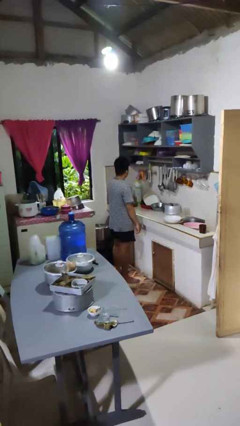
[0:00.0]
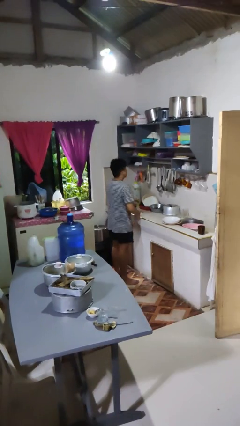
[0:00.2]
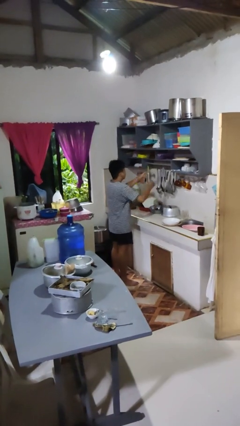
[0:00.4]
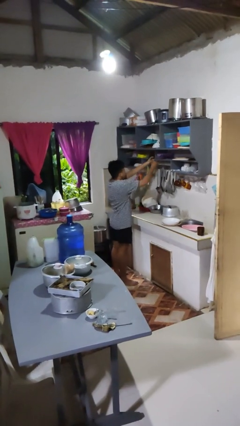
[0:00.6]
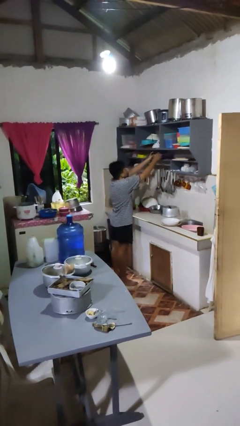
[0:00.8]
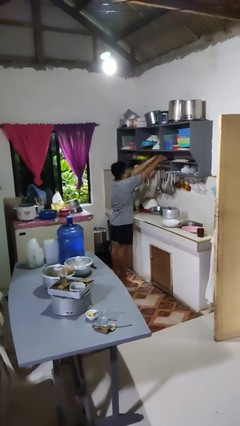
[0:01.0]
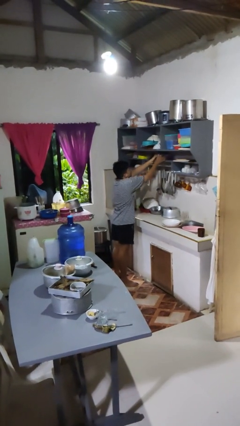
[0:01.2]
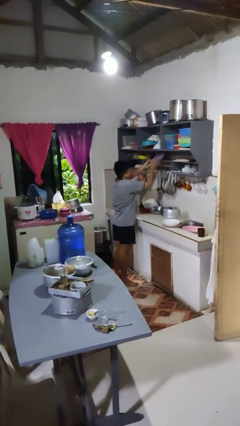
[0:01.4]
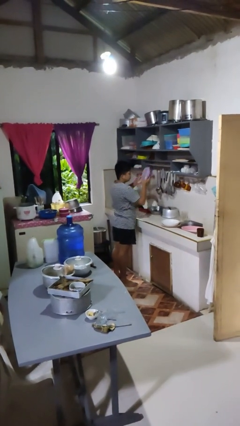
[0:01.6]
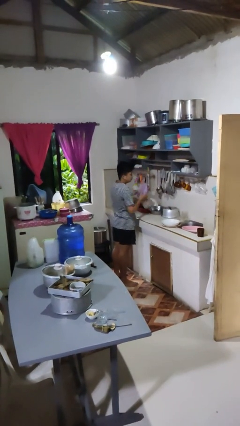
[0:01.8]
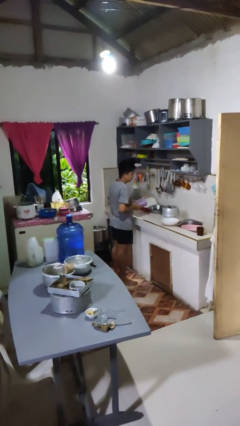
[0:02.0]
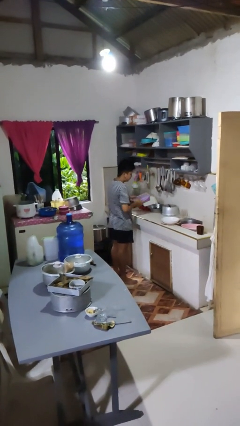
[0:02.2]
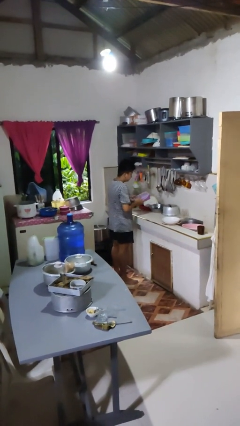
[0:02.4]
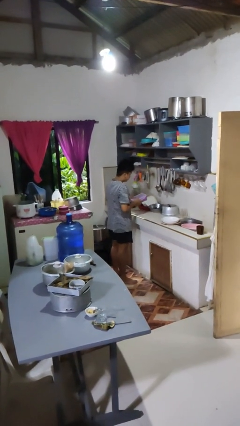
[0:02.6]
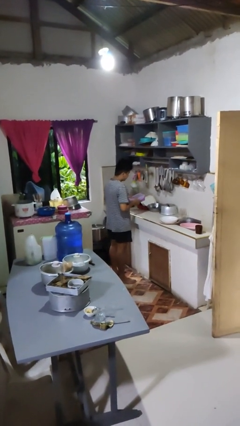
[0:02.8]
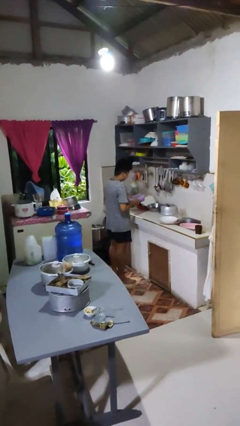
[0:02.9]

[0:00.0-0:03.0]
person picks up object from cabinet

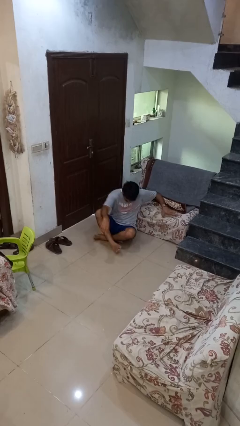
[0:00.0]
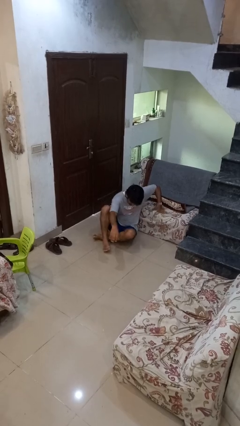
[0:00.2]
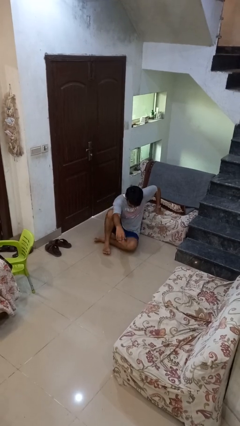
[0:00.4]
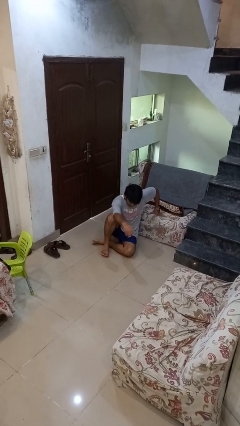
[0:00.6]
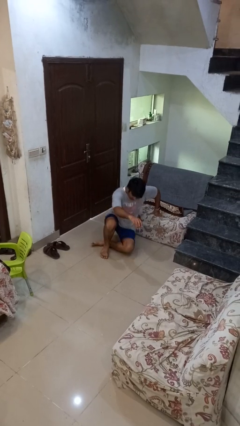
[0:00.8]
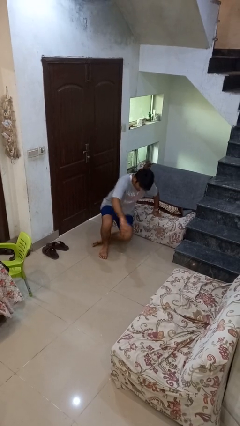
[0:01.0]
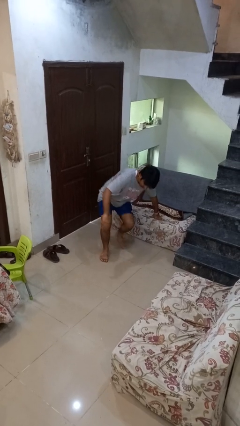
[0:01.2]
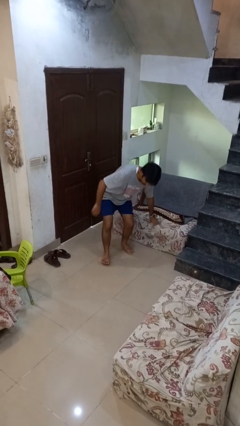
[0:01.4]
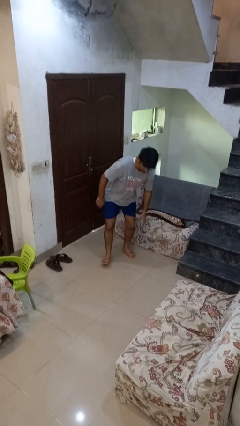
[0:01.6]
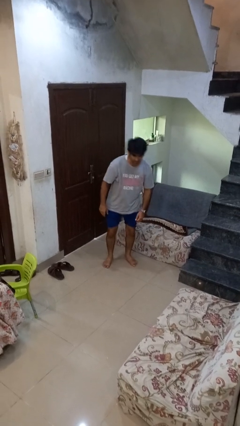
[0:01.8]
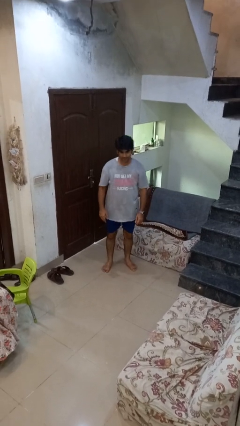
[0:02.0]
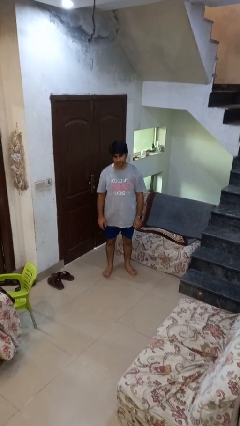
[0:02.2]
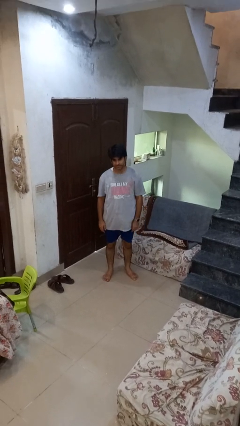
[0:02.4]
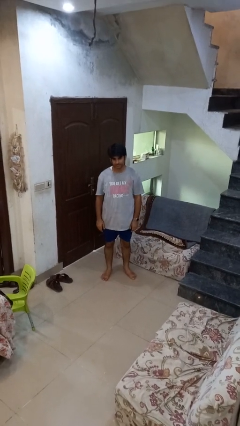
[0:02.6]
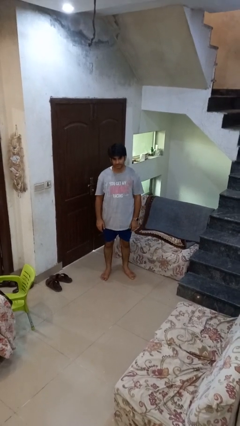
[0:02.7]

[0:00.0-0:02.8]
person stands up from floor

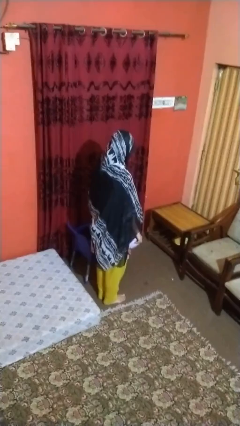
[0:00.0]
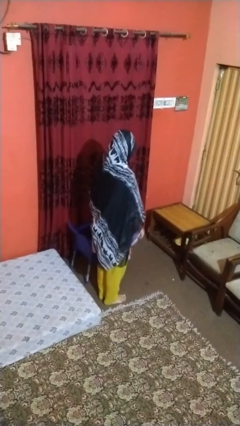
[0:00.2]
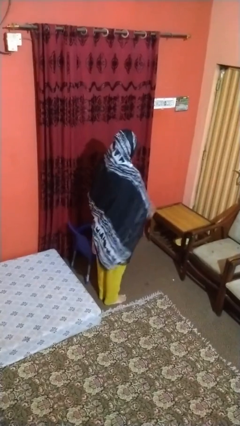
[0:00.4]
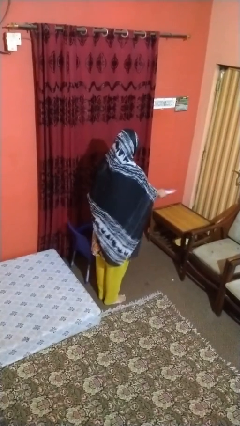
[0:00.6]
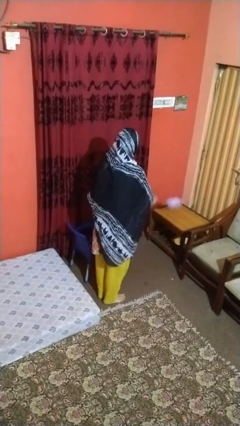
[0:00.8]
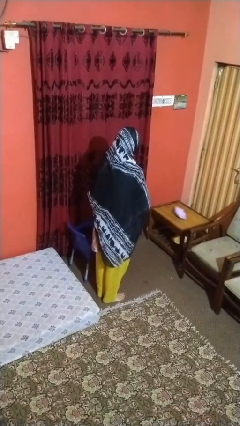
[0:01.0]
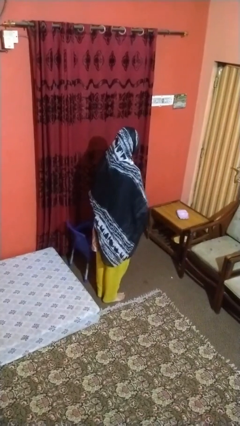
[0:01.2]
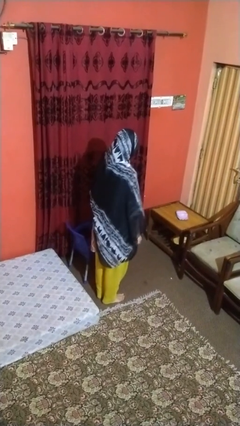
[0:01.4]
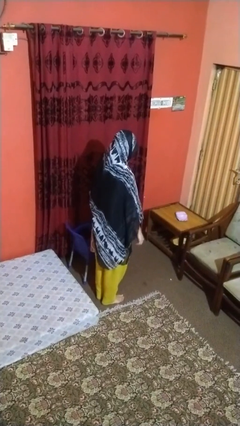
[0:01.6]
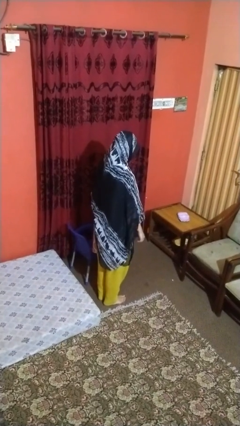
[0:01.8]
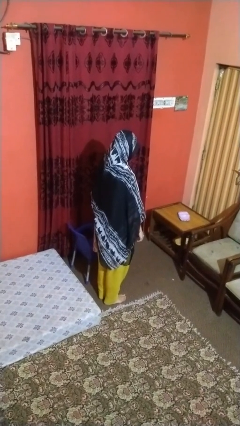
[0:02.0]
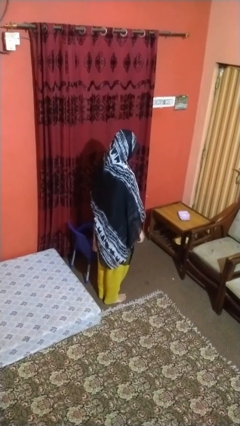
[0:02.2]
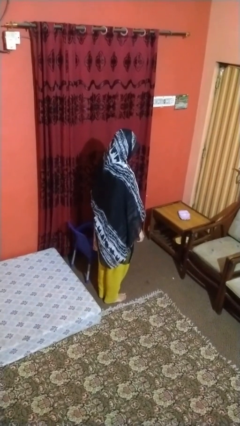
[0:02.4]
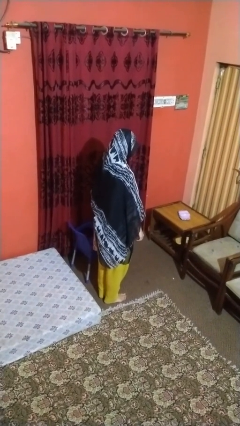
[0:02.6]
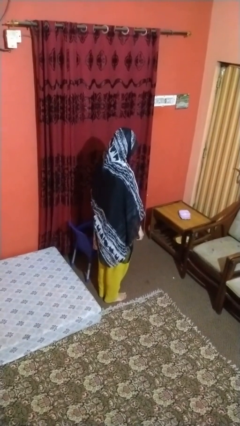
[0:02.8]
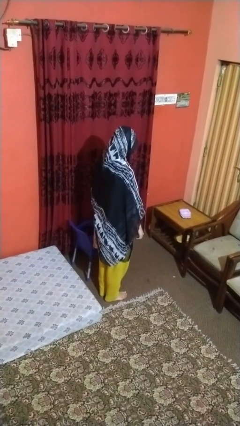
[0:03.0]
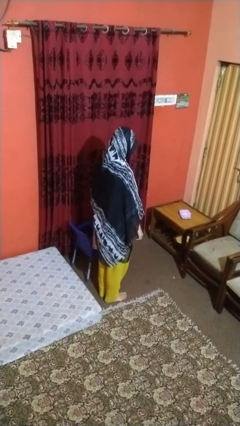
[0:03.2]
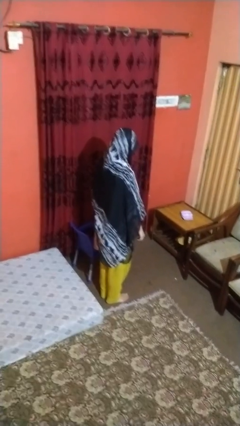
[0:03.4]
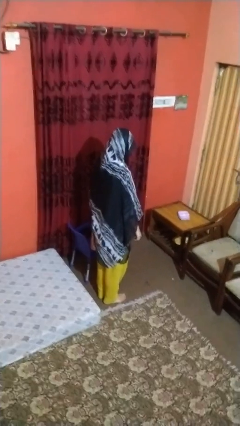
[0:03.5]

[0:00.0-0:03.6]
person throws object on table

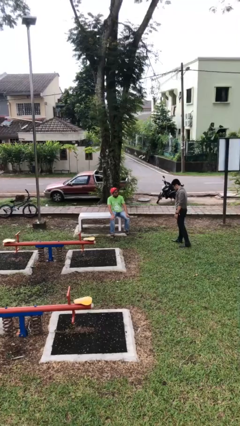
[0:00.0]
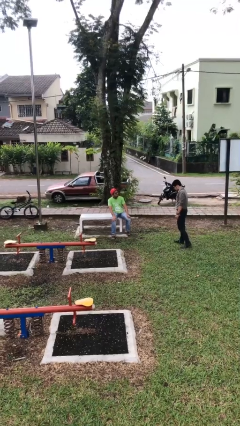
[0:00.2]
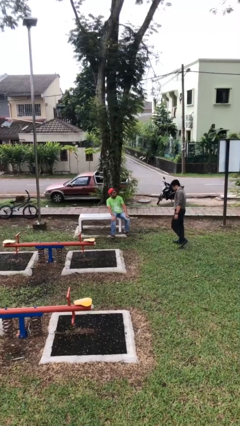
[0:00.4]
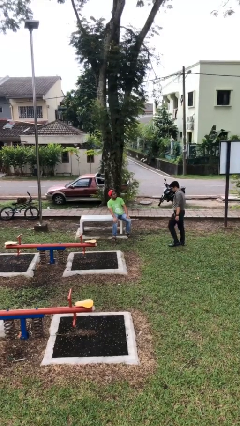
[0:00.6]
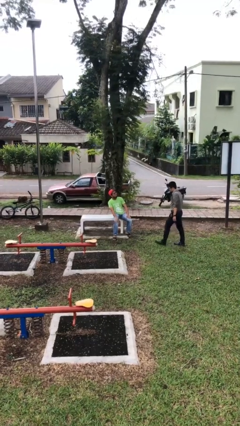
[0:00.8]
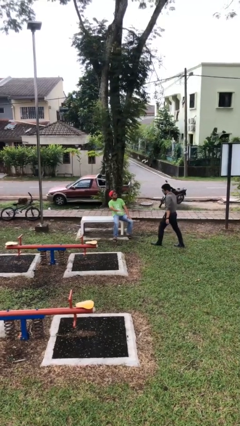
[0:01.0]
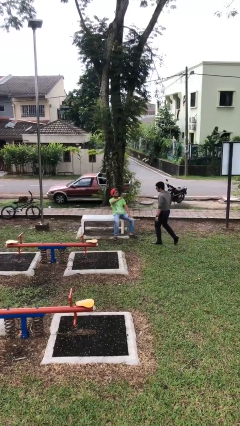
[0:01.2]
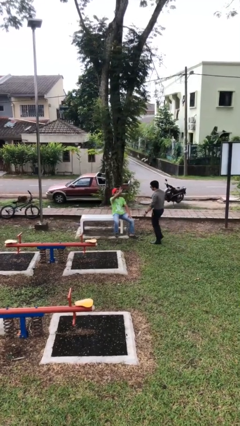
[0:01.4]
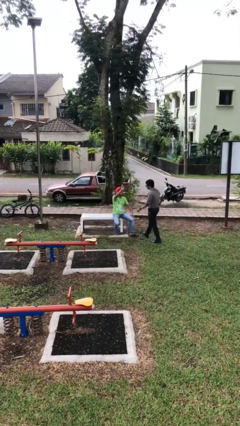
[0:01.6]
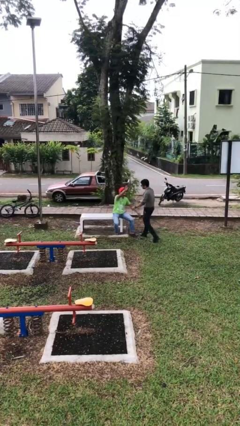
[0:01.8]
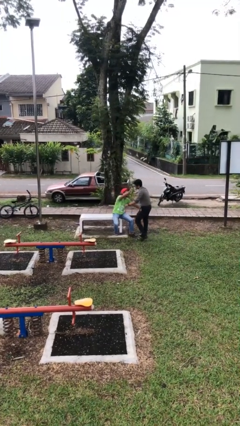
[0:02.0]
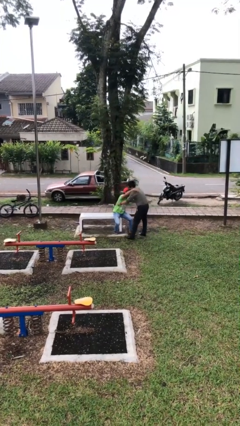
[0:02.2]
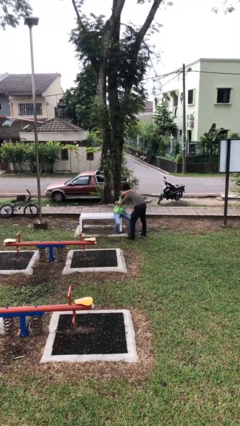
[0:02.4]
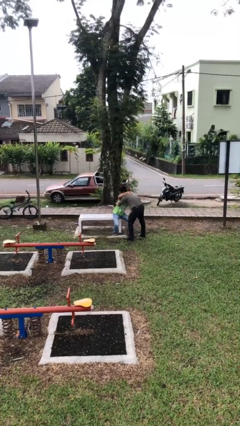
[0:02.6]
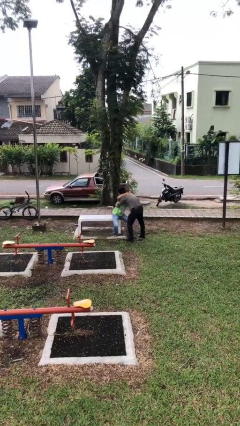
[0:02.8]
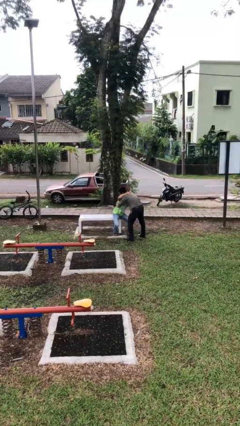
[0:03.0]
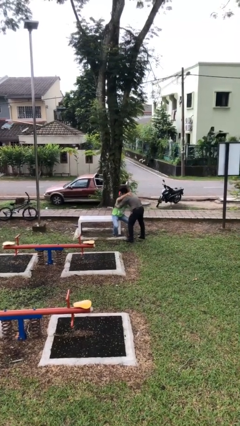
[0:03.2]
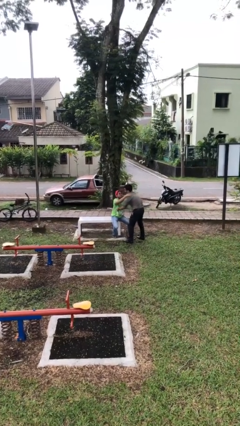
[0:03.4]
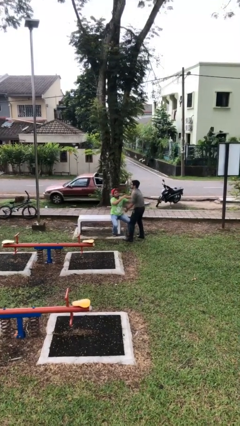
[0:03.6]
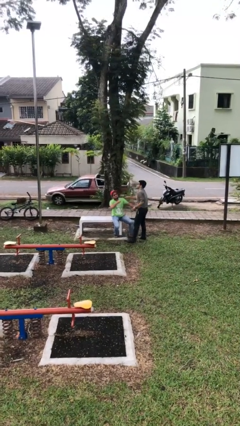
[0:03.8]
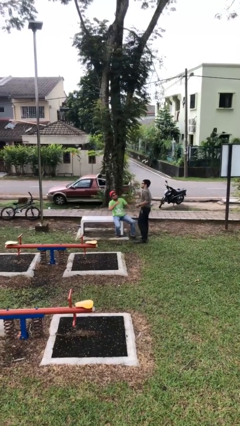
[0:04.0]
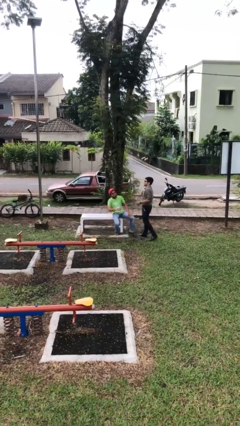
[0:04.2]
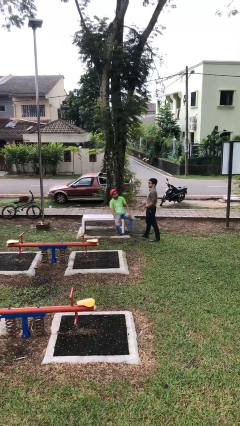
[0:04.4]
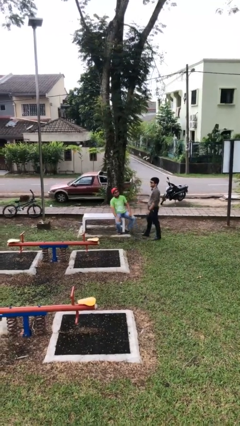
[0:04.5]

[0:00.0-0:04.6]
person embraces person

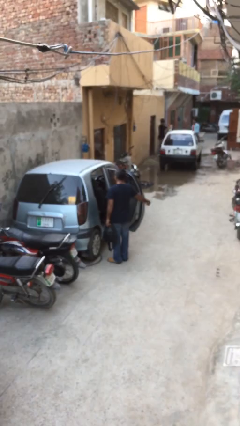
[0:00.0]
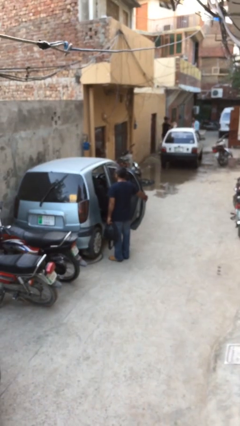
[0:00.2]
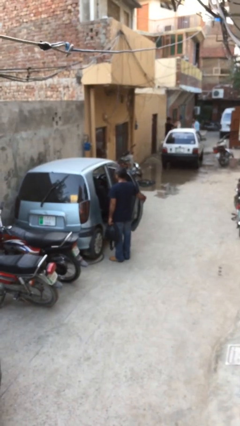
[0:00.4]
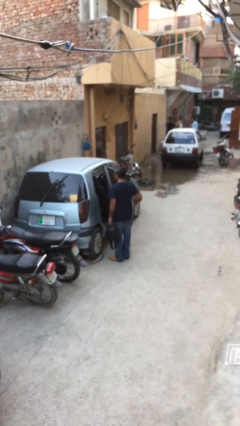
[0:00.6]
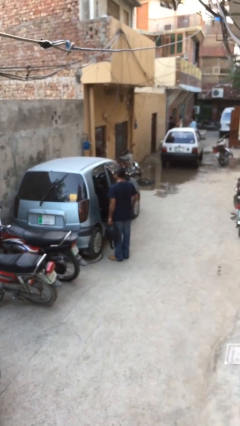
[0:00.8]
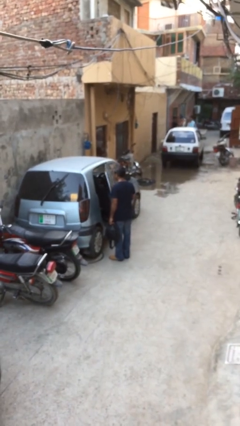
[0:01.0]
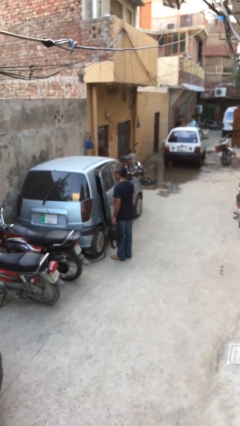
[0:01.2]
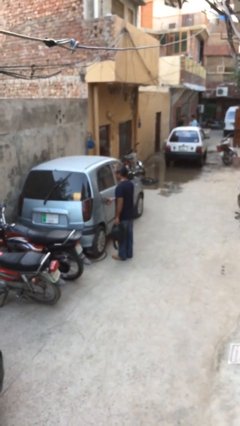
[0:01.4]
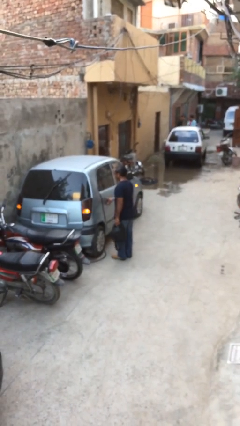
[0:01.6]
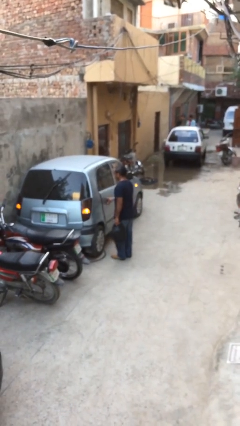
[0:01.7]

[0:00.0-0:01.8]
person closes car door

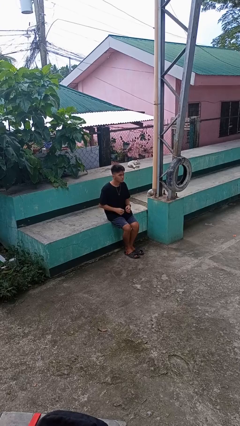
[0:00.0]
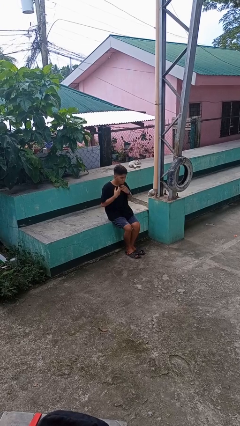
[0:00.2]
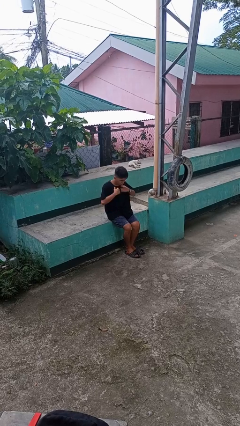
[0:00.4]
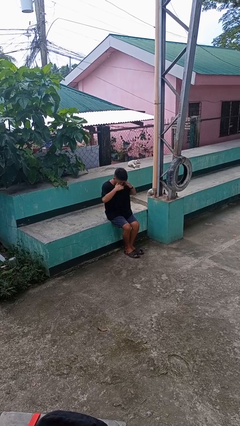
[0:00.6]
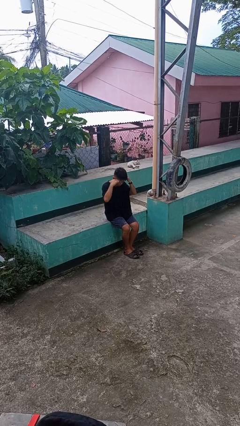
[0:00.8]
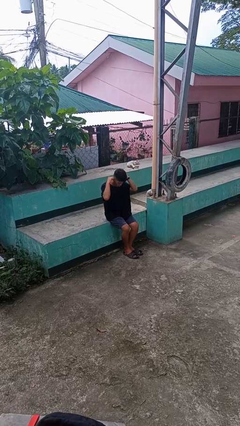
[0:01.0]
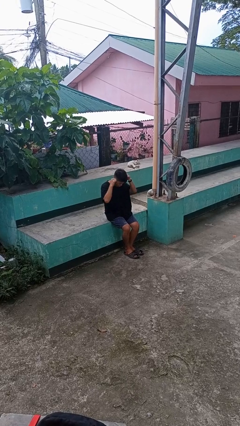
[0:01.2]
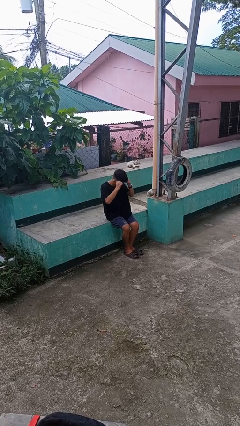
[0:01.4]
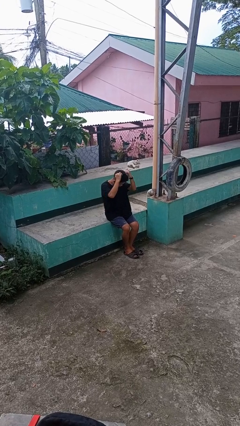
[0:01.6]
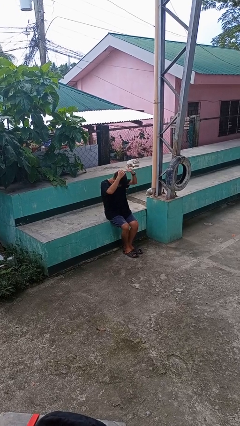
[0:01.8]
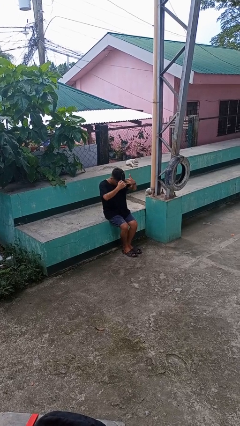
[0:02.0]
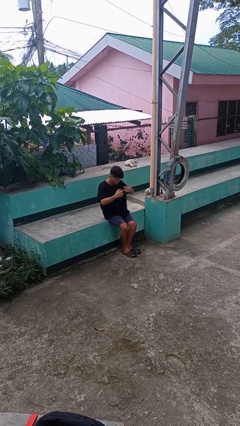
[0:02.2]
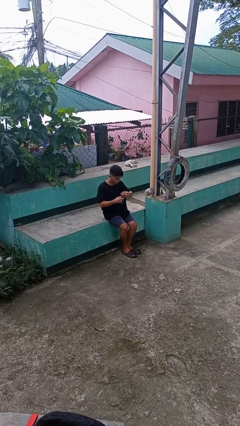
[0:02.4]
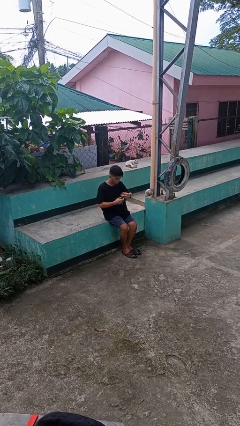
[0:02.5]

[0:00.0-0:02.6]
person takes off necklace
